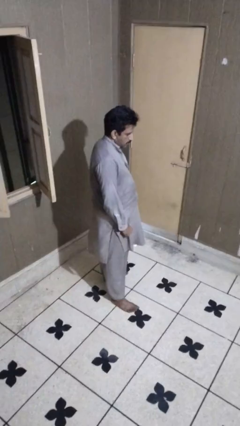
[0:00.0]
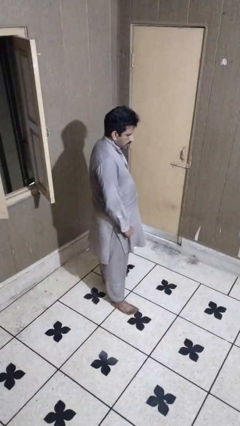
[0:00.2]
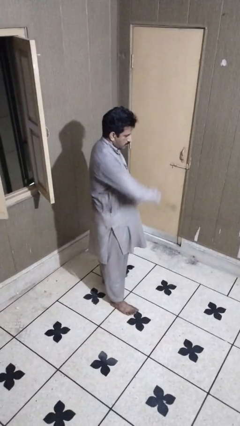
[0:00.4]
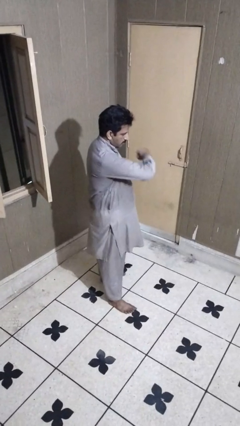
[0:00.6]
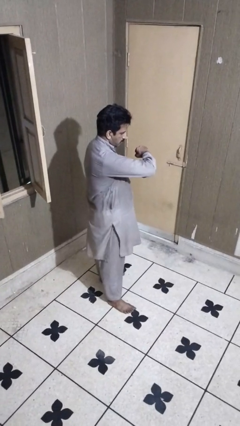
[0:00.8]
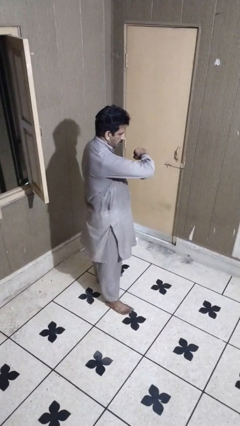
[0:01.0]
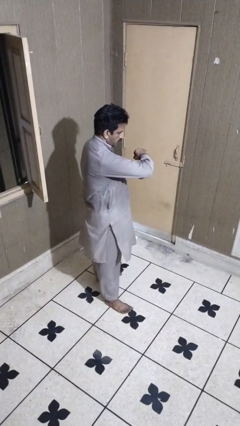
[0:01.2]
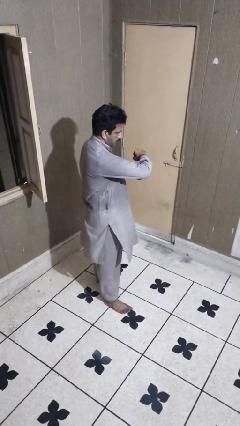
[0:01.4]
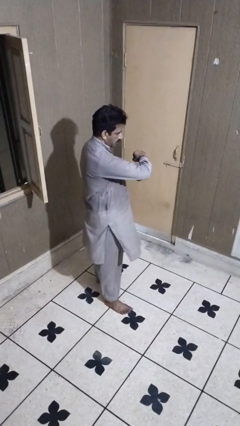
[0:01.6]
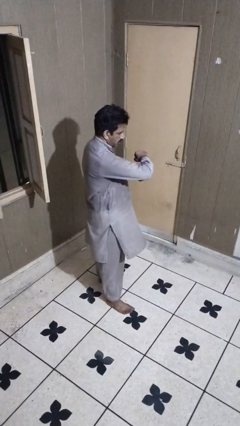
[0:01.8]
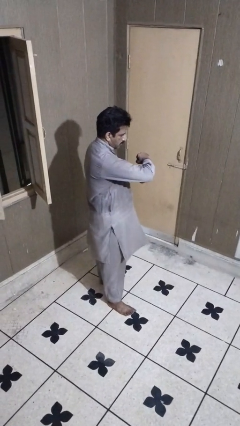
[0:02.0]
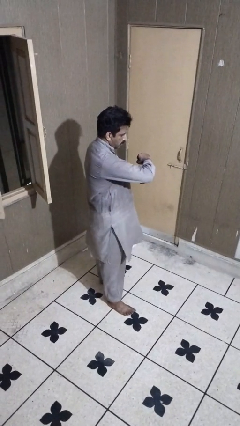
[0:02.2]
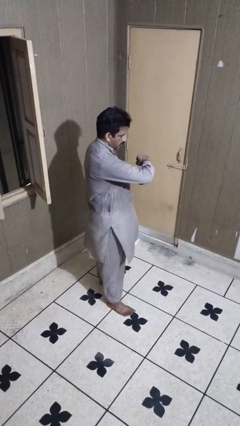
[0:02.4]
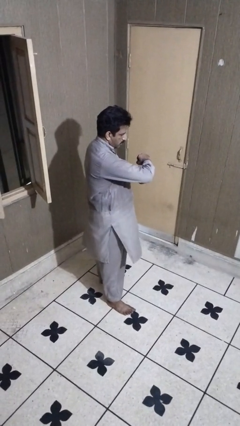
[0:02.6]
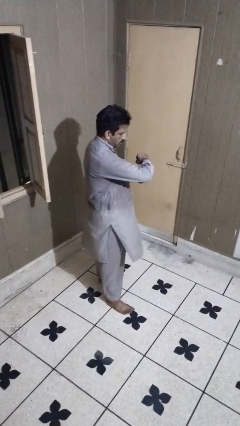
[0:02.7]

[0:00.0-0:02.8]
person karate chop

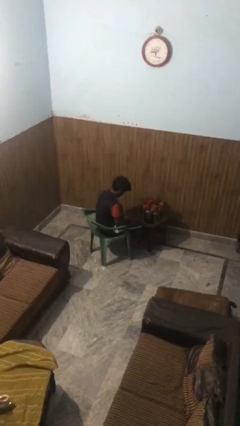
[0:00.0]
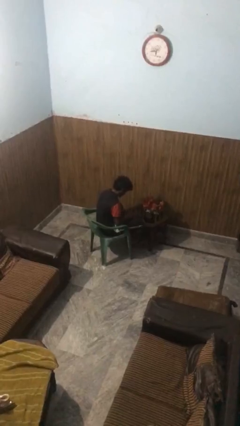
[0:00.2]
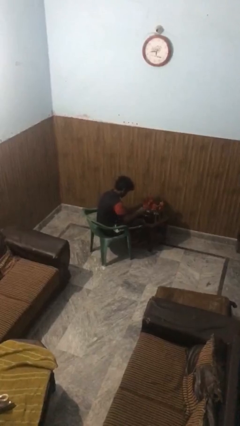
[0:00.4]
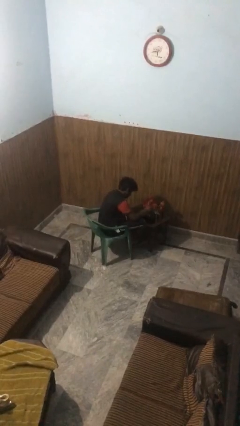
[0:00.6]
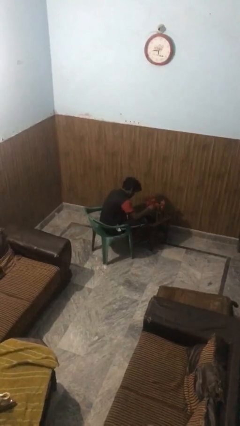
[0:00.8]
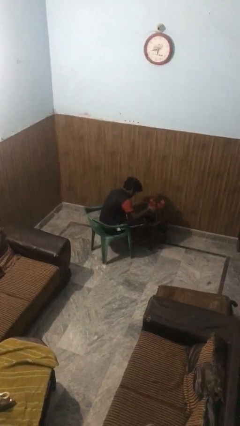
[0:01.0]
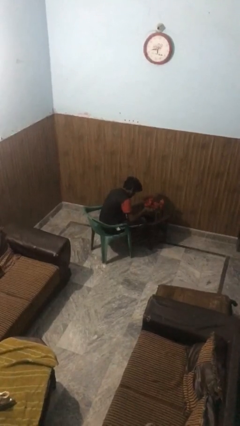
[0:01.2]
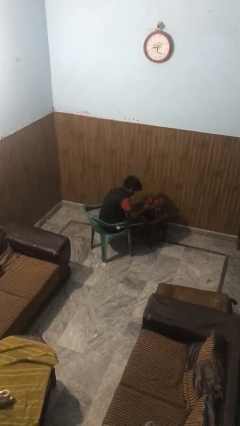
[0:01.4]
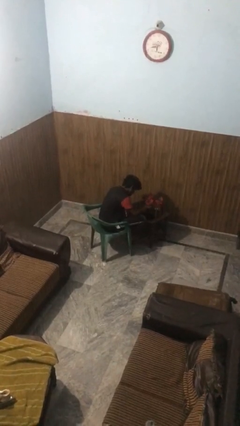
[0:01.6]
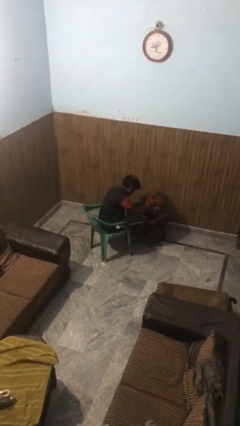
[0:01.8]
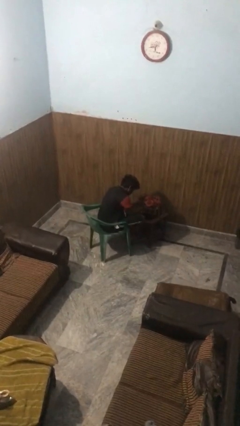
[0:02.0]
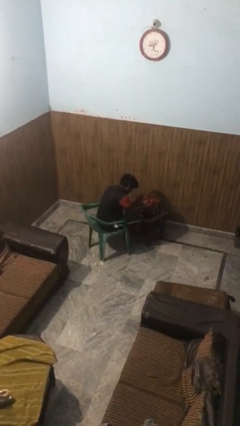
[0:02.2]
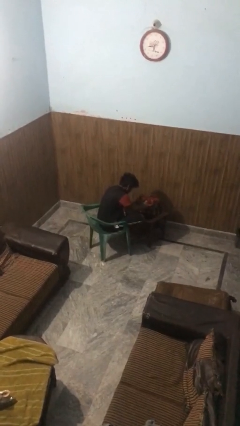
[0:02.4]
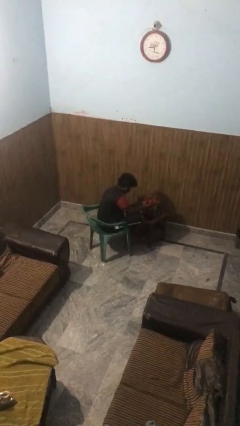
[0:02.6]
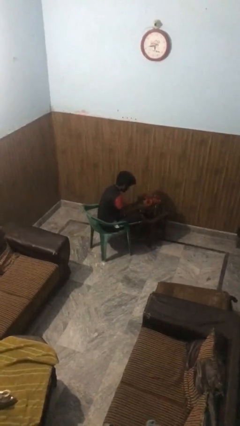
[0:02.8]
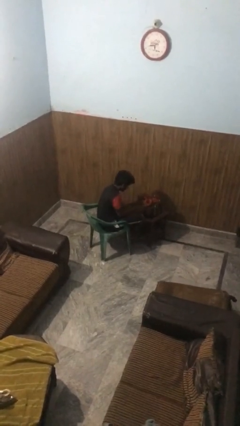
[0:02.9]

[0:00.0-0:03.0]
person arranges flowers in vase

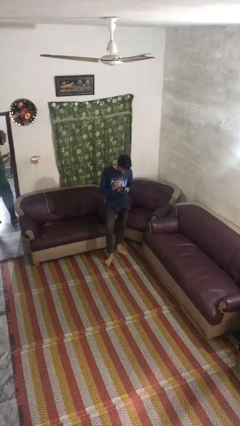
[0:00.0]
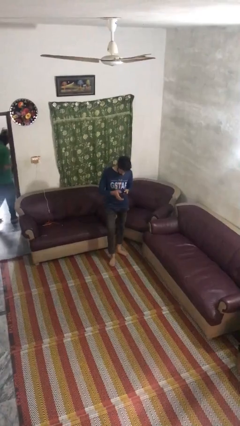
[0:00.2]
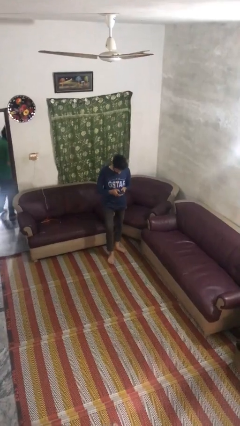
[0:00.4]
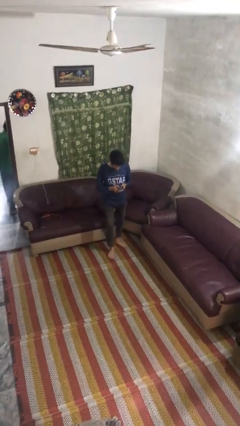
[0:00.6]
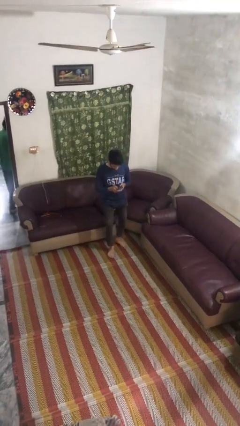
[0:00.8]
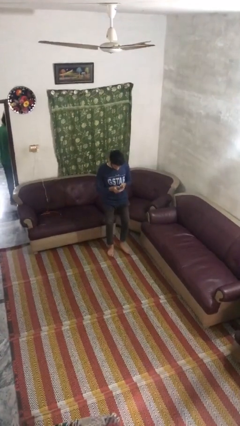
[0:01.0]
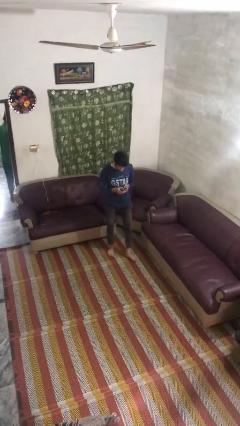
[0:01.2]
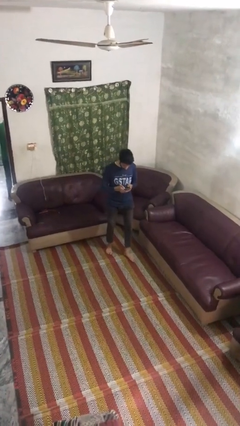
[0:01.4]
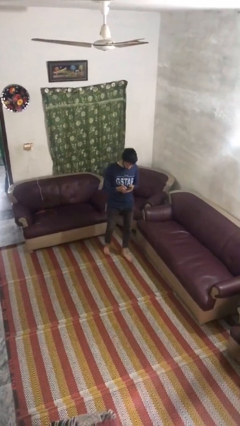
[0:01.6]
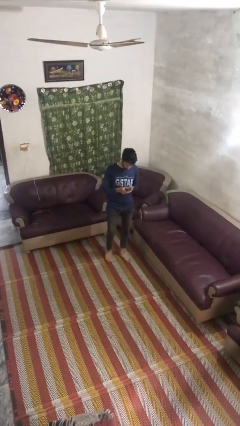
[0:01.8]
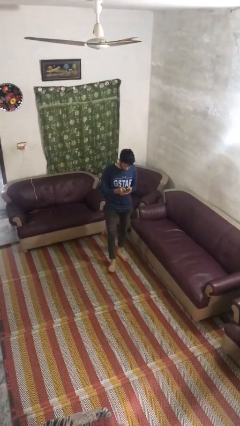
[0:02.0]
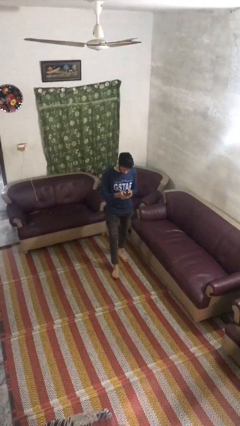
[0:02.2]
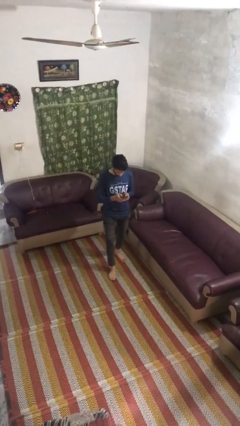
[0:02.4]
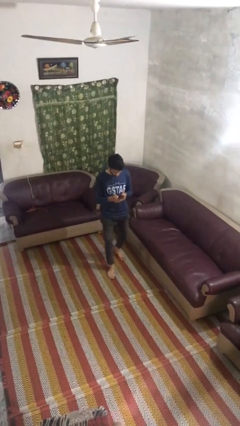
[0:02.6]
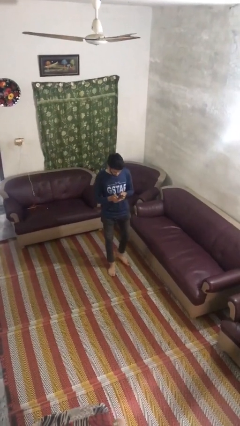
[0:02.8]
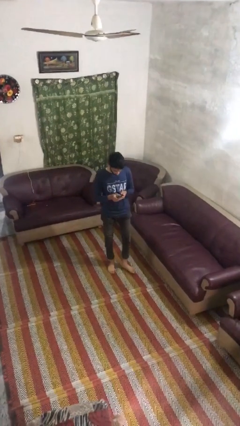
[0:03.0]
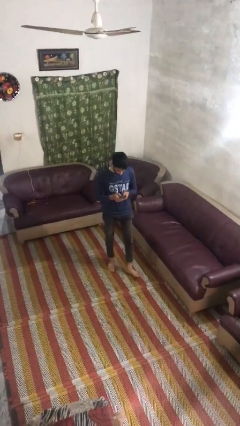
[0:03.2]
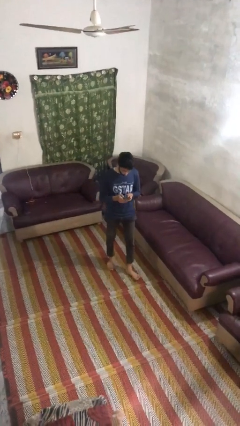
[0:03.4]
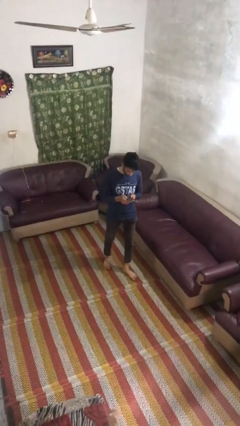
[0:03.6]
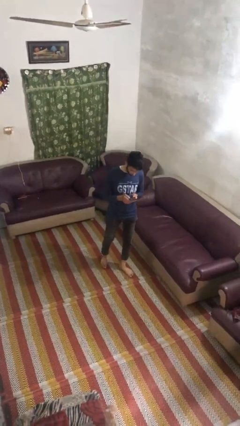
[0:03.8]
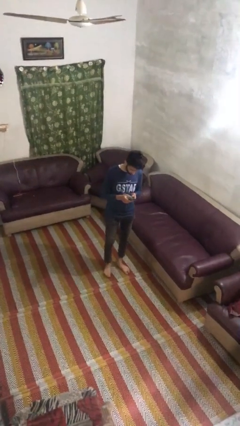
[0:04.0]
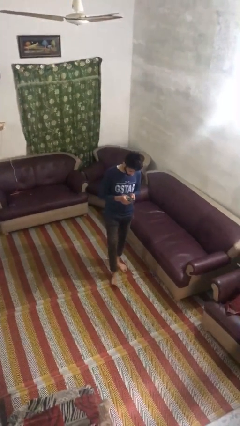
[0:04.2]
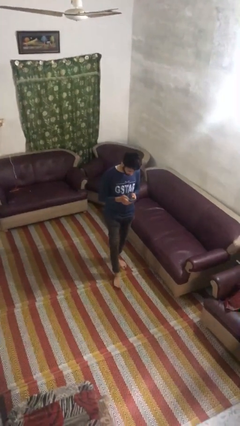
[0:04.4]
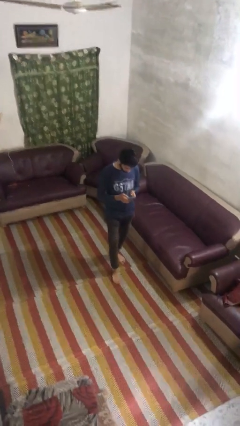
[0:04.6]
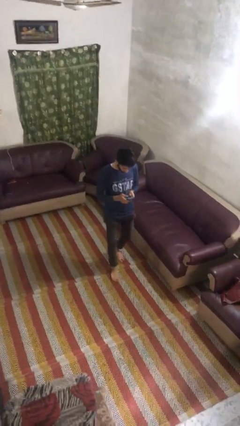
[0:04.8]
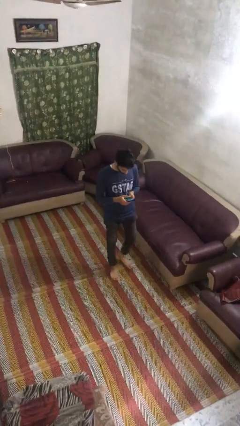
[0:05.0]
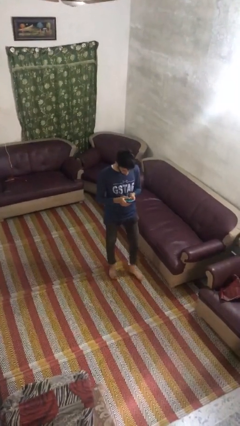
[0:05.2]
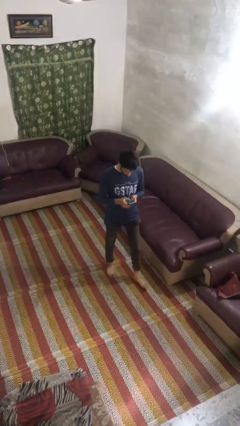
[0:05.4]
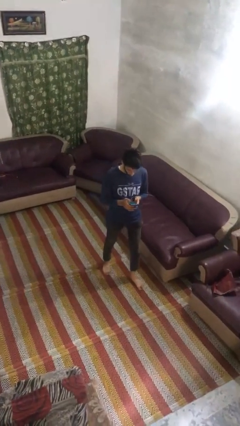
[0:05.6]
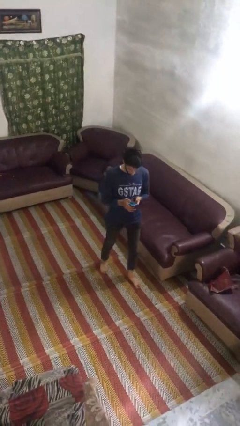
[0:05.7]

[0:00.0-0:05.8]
person texts on phone

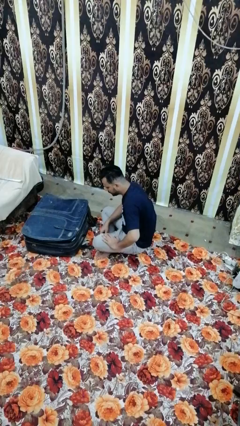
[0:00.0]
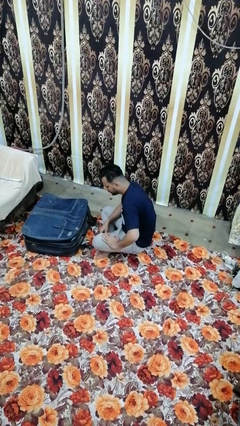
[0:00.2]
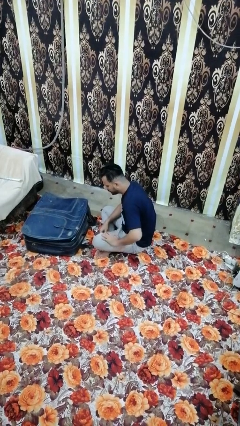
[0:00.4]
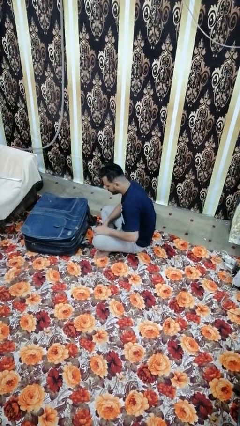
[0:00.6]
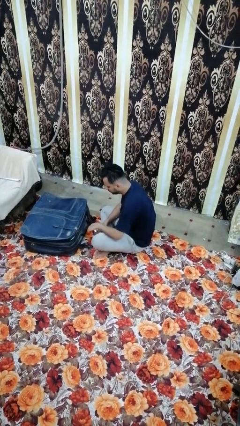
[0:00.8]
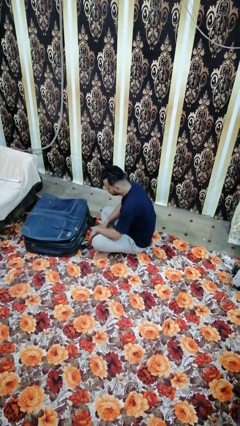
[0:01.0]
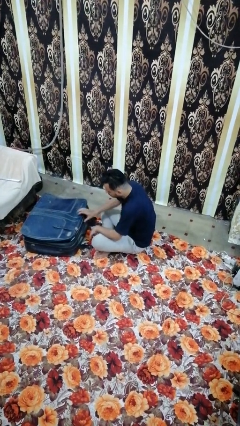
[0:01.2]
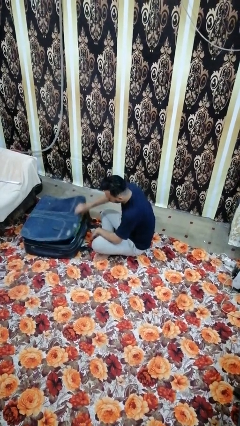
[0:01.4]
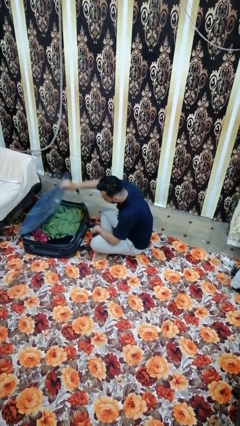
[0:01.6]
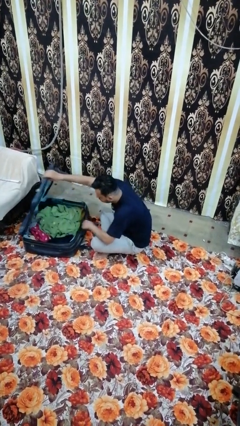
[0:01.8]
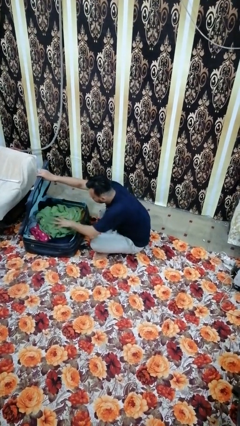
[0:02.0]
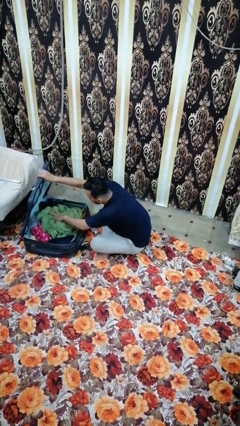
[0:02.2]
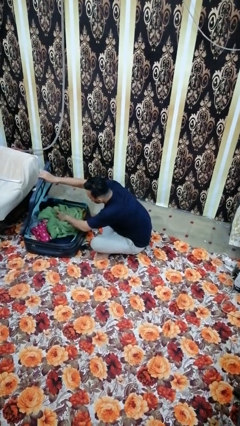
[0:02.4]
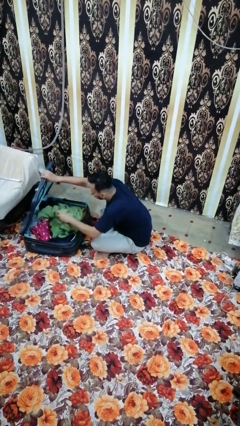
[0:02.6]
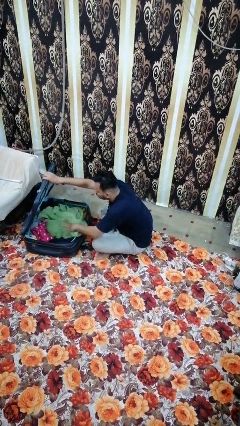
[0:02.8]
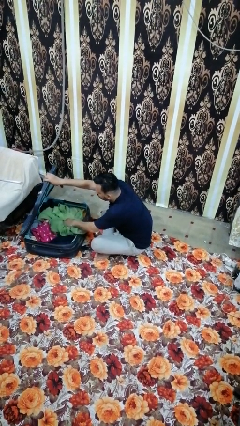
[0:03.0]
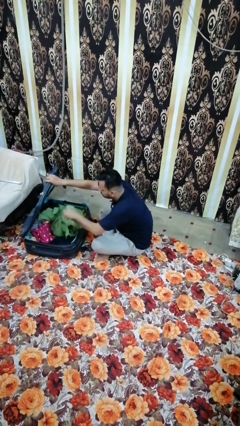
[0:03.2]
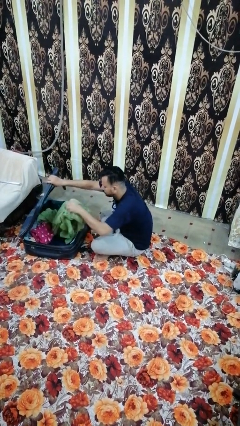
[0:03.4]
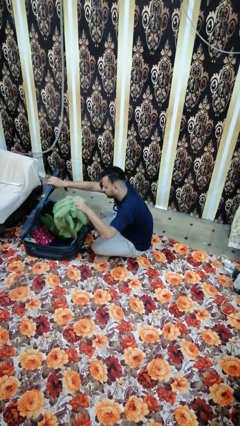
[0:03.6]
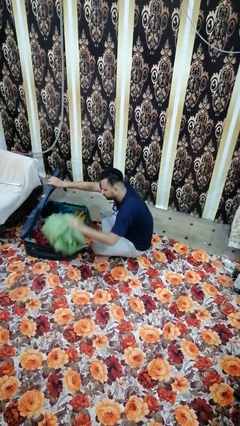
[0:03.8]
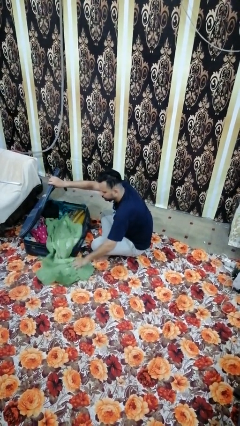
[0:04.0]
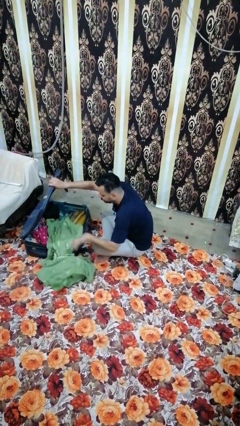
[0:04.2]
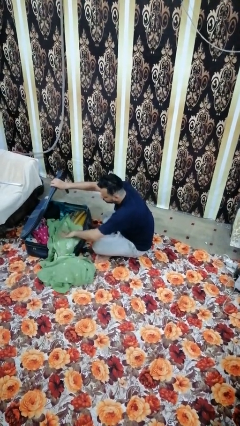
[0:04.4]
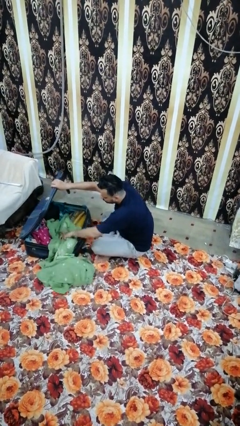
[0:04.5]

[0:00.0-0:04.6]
person unloads clothes from suitcase

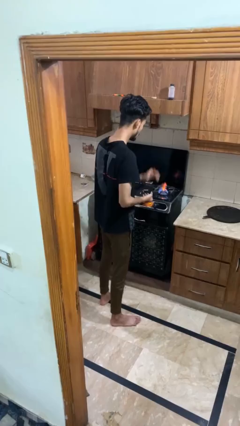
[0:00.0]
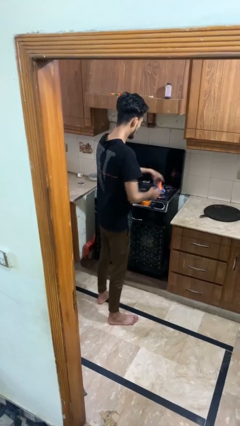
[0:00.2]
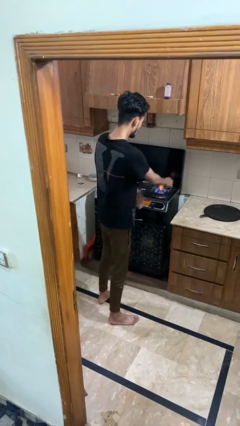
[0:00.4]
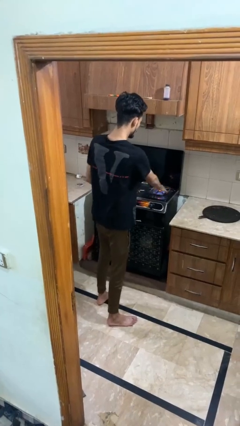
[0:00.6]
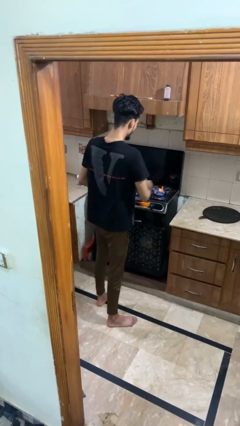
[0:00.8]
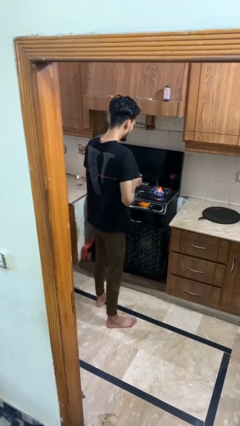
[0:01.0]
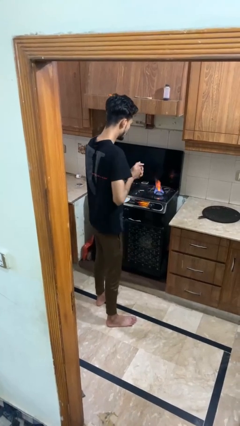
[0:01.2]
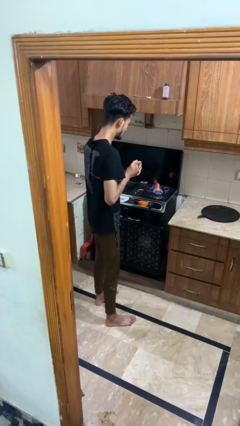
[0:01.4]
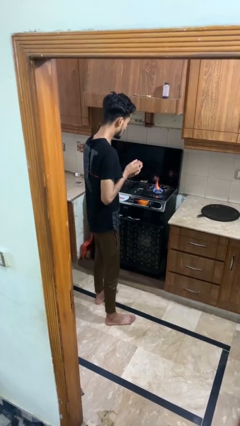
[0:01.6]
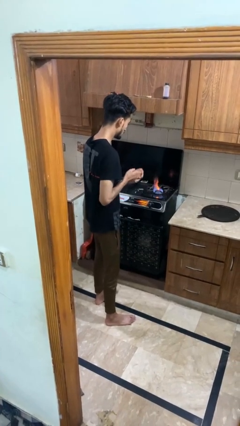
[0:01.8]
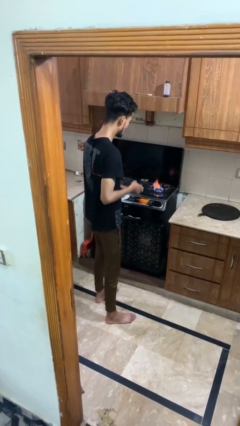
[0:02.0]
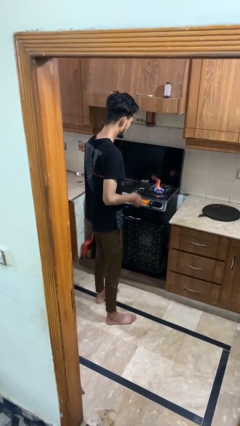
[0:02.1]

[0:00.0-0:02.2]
person burns hand
